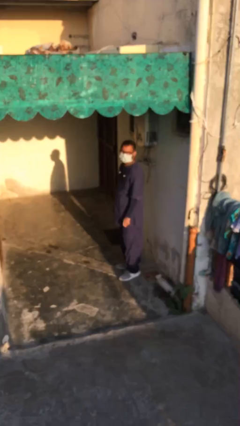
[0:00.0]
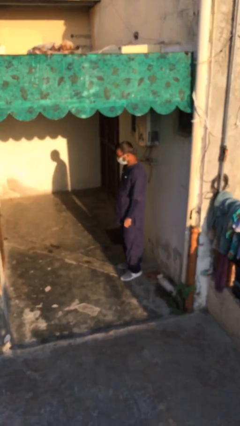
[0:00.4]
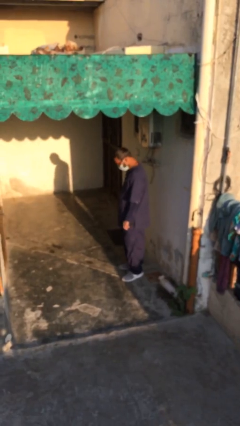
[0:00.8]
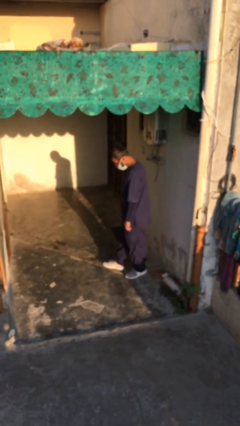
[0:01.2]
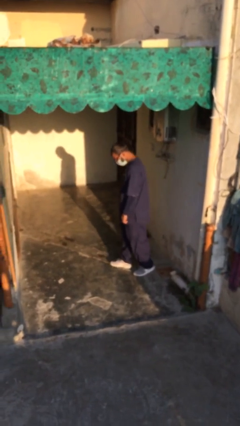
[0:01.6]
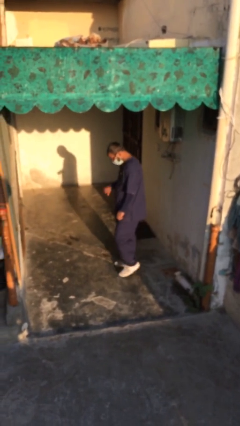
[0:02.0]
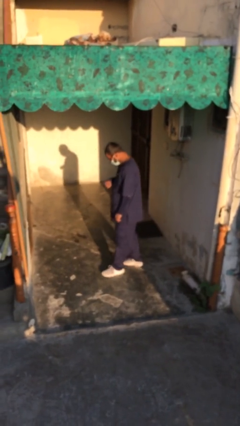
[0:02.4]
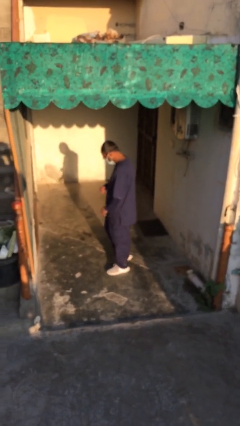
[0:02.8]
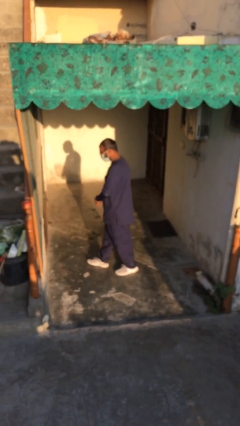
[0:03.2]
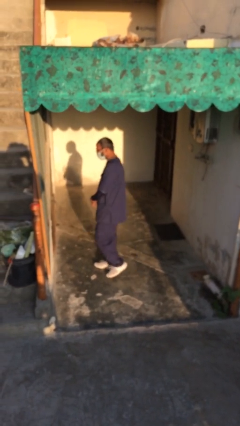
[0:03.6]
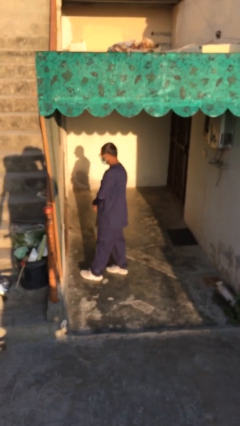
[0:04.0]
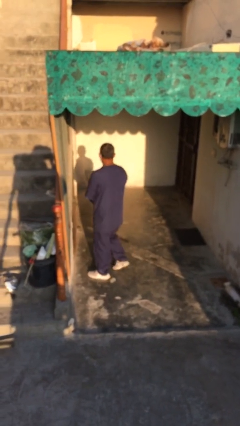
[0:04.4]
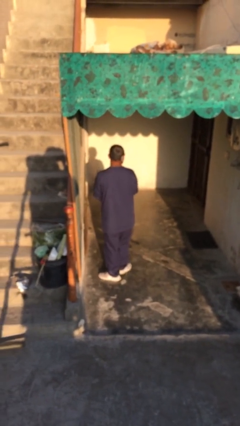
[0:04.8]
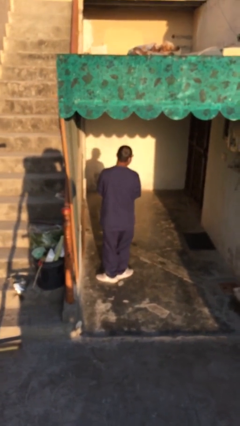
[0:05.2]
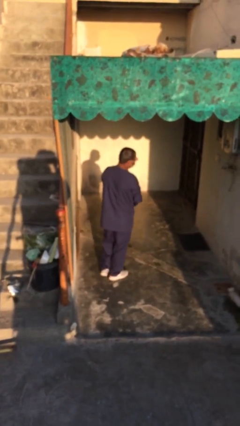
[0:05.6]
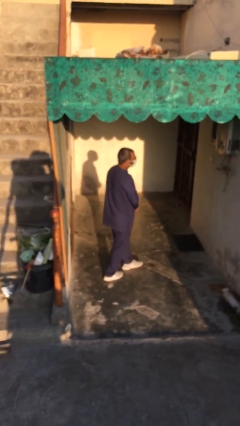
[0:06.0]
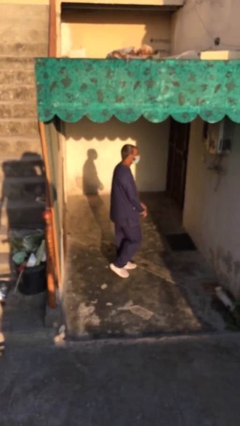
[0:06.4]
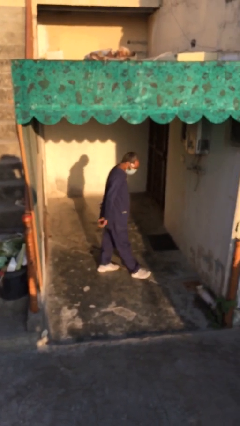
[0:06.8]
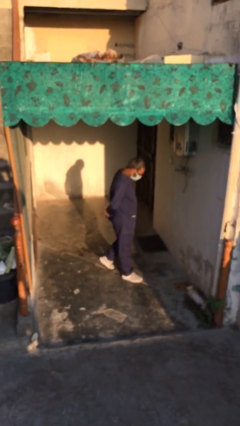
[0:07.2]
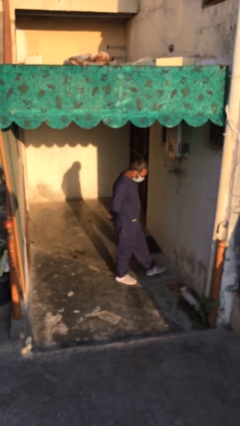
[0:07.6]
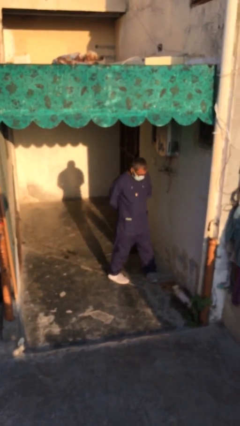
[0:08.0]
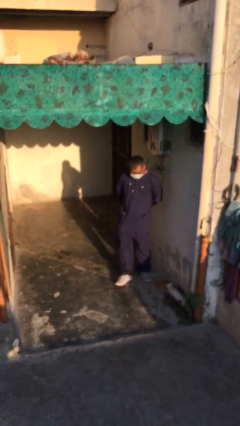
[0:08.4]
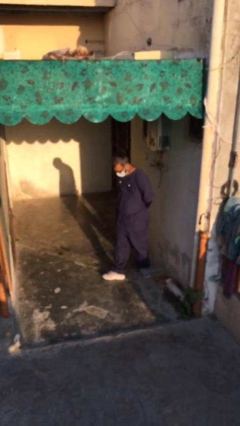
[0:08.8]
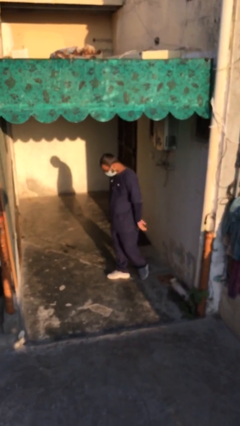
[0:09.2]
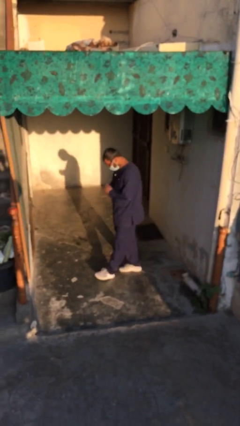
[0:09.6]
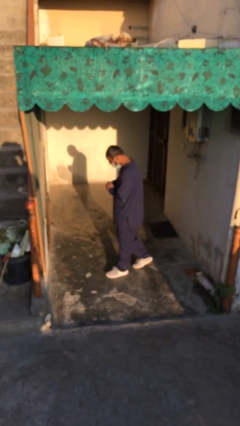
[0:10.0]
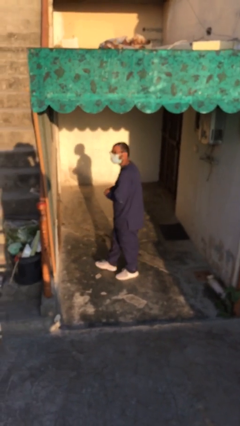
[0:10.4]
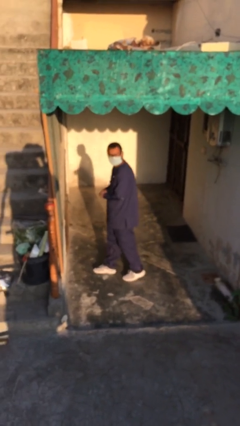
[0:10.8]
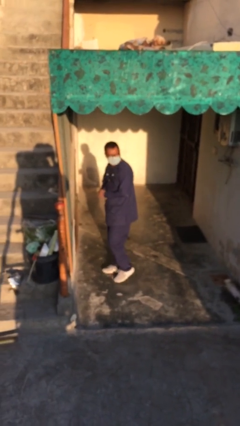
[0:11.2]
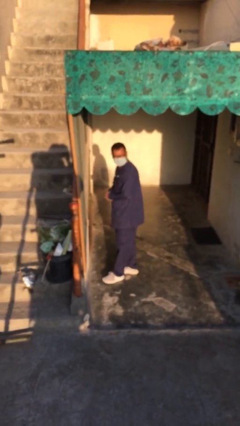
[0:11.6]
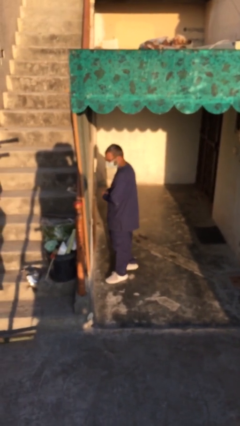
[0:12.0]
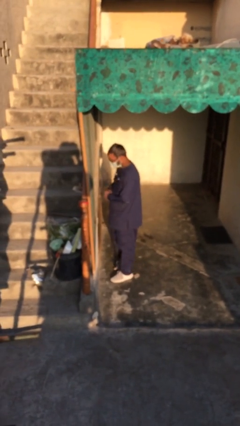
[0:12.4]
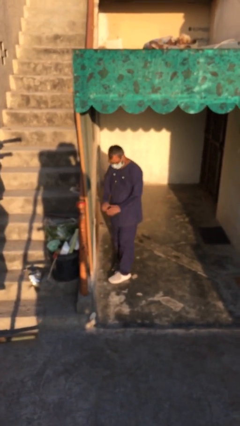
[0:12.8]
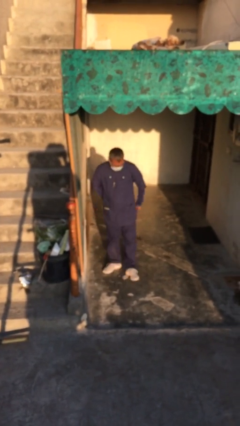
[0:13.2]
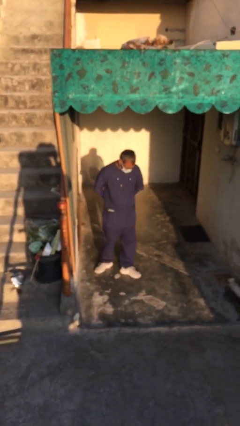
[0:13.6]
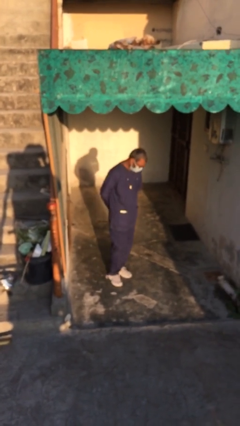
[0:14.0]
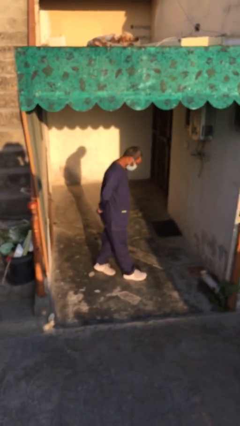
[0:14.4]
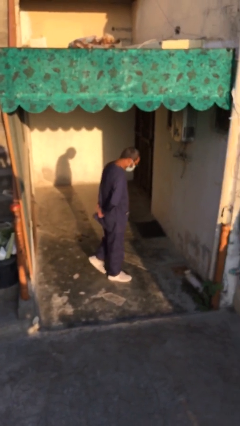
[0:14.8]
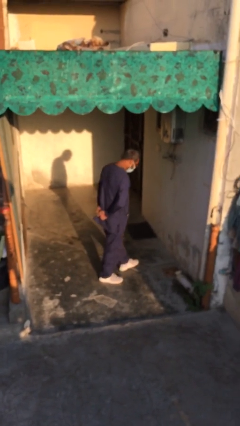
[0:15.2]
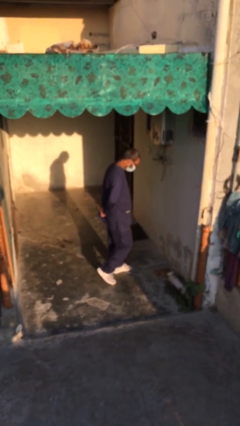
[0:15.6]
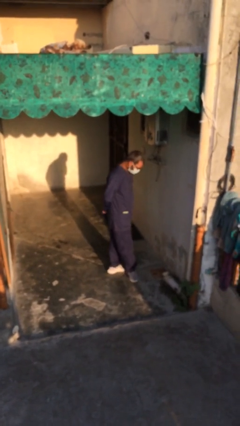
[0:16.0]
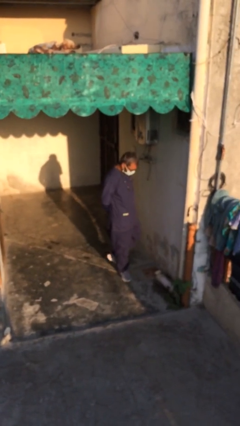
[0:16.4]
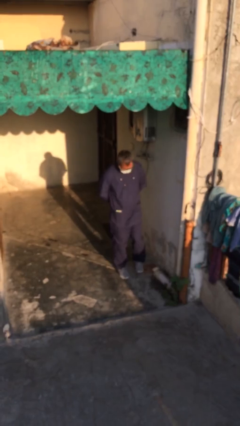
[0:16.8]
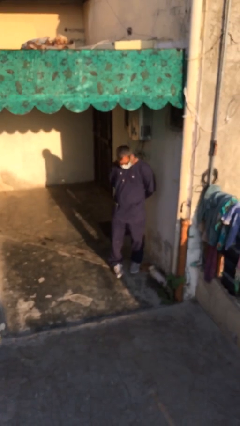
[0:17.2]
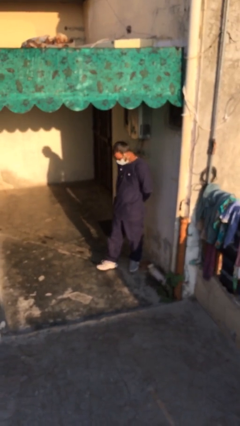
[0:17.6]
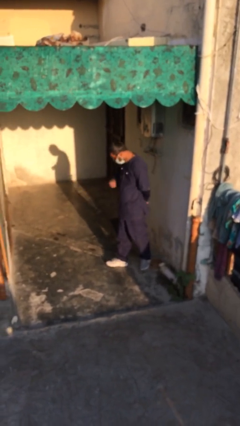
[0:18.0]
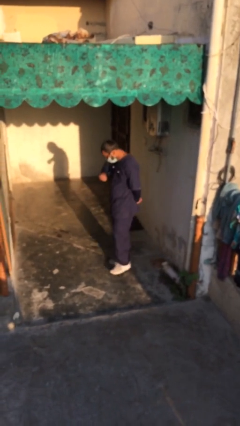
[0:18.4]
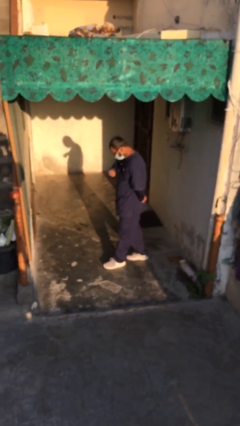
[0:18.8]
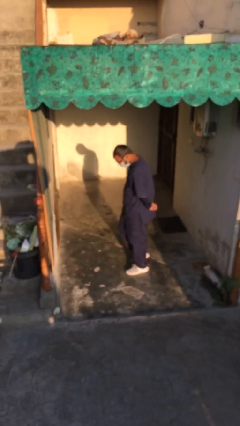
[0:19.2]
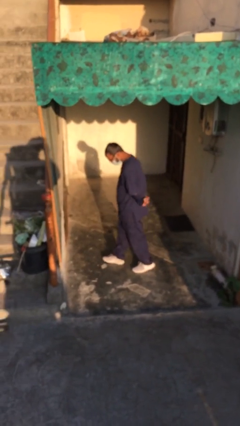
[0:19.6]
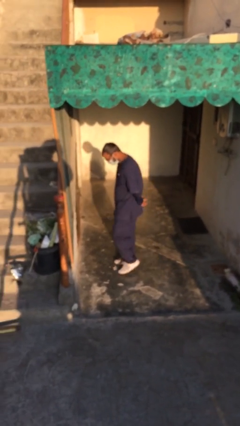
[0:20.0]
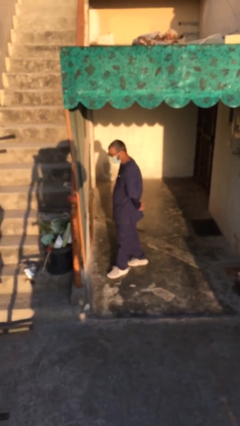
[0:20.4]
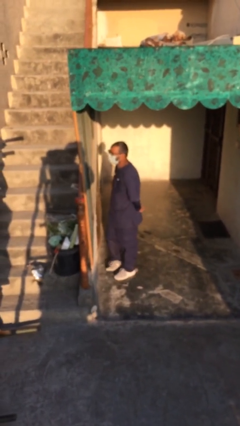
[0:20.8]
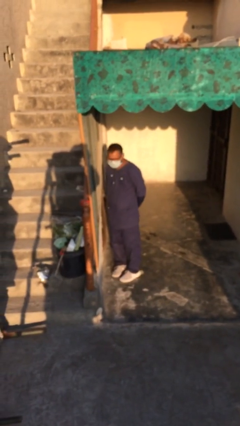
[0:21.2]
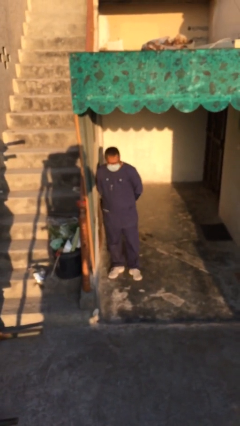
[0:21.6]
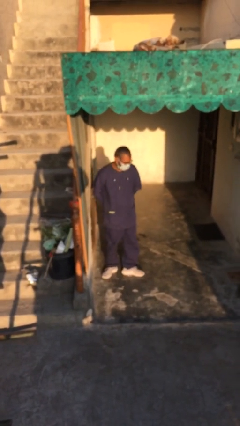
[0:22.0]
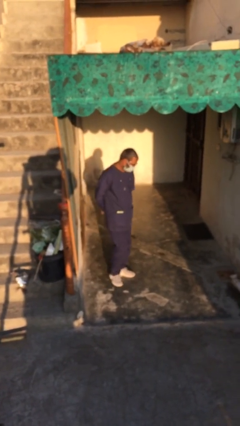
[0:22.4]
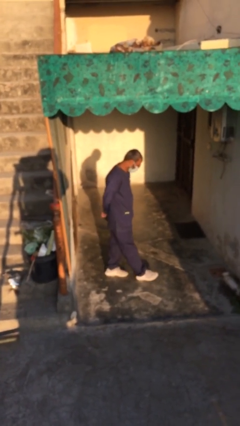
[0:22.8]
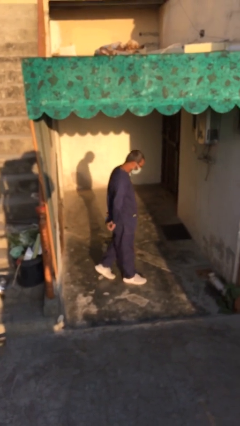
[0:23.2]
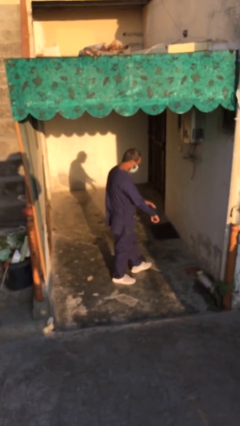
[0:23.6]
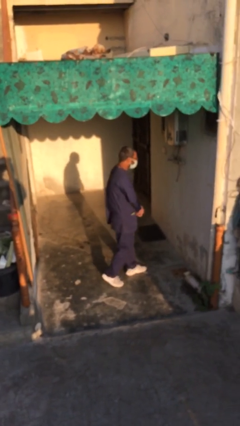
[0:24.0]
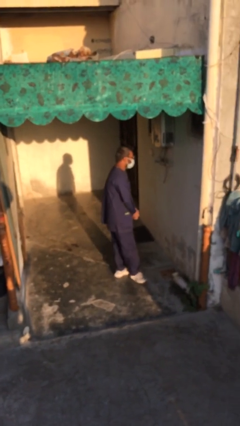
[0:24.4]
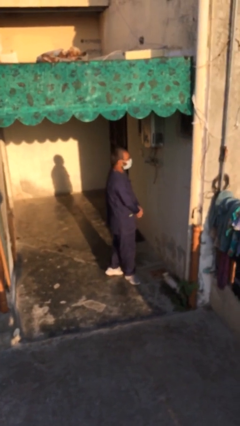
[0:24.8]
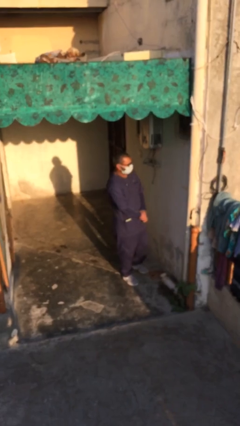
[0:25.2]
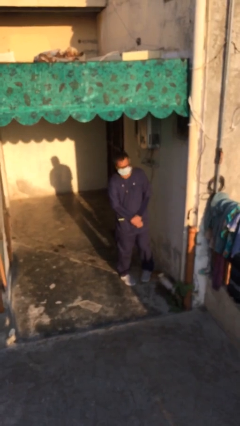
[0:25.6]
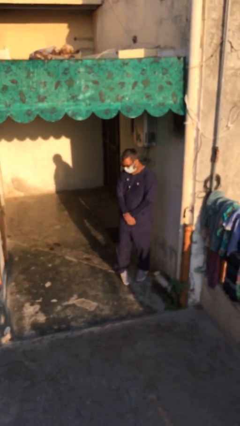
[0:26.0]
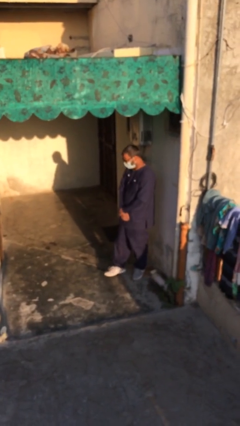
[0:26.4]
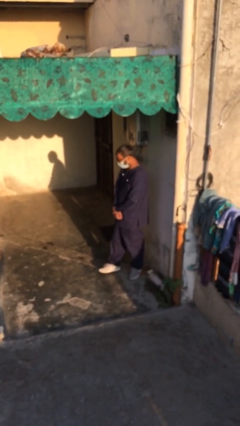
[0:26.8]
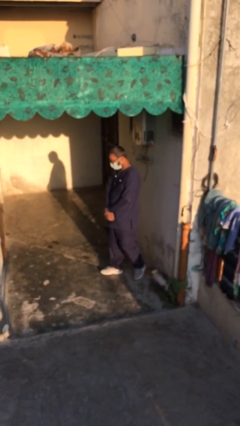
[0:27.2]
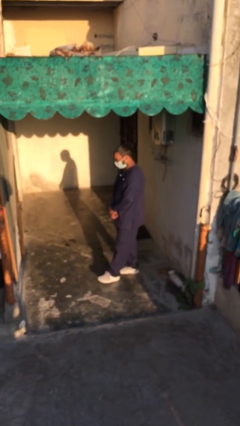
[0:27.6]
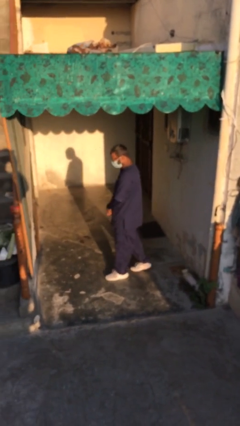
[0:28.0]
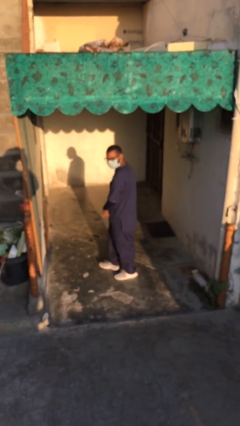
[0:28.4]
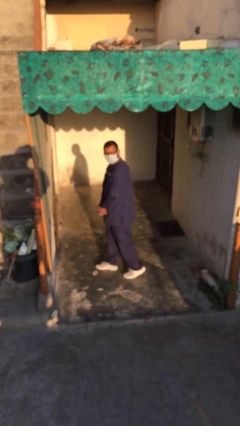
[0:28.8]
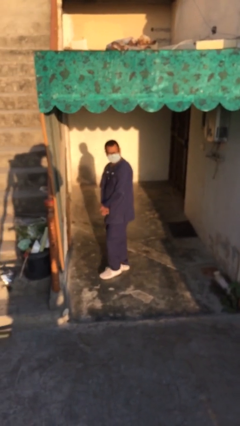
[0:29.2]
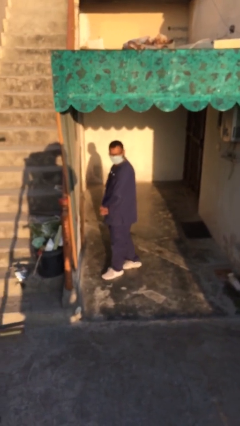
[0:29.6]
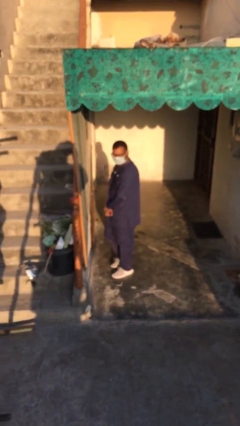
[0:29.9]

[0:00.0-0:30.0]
person walks

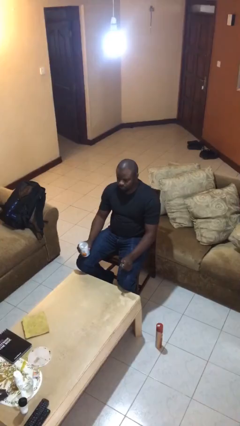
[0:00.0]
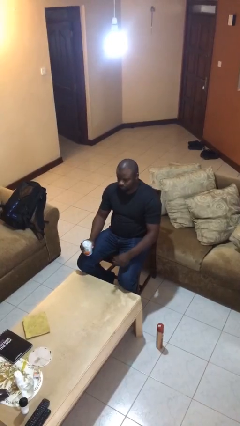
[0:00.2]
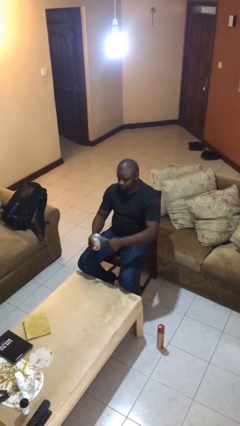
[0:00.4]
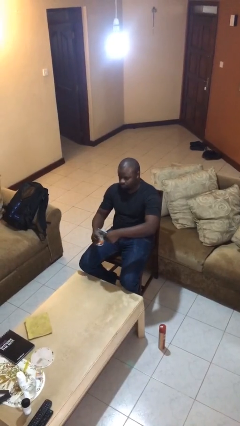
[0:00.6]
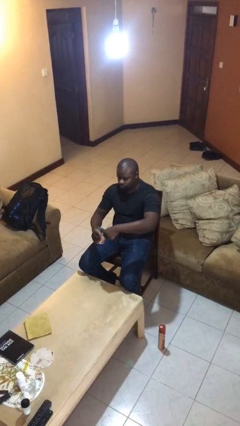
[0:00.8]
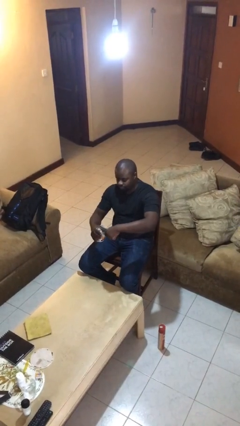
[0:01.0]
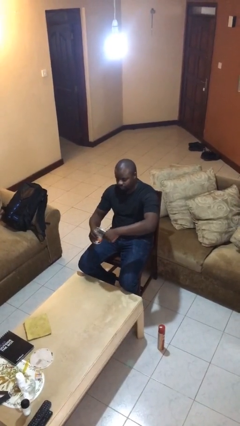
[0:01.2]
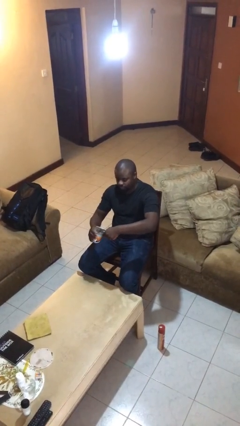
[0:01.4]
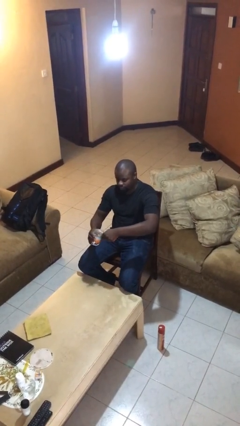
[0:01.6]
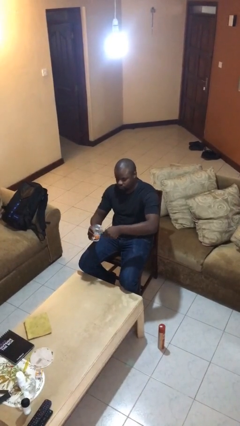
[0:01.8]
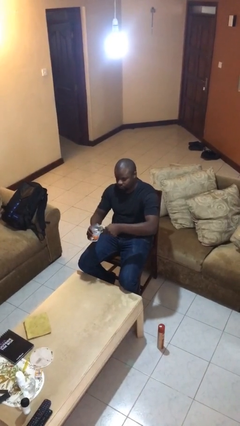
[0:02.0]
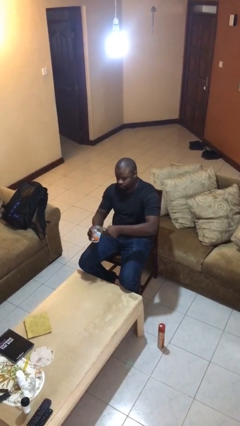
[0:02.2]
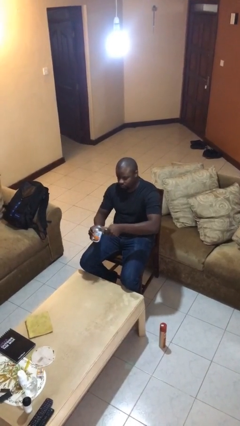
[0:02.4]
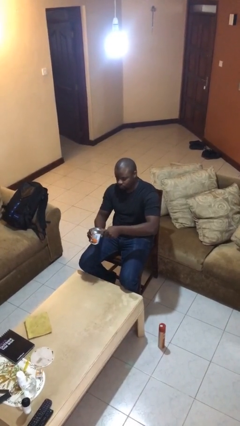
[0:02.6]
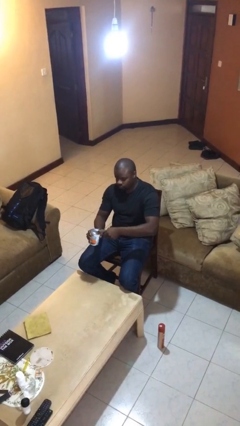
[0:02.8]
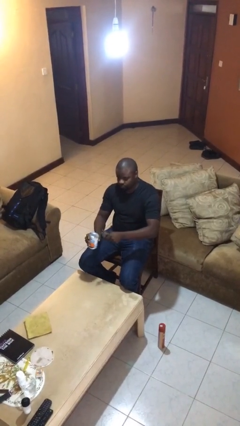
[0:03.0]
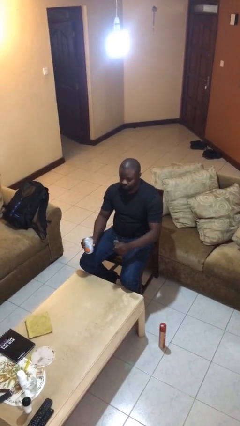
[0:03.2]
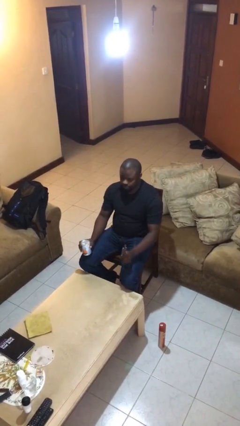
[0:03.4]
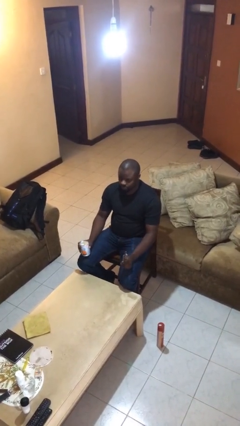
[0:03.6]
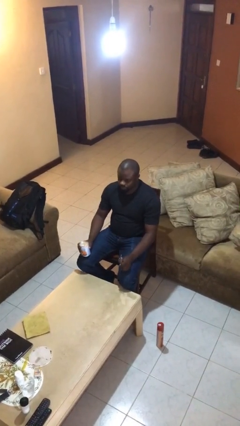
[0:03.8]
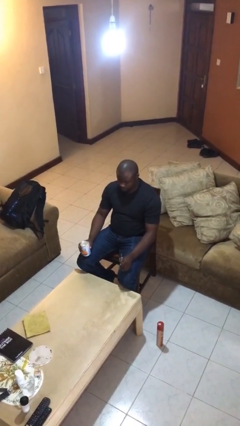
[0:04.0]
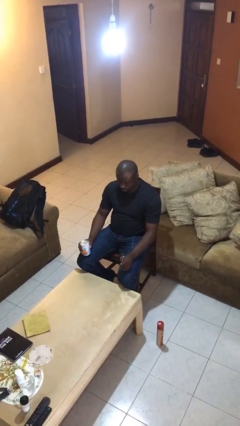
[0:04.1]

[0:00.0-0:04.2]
person opens can with can opener
